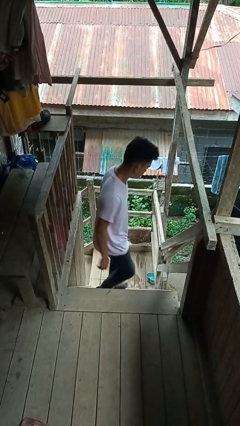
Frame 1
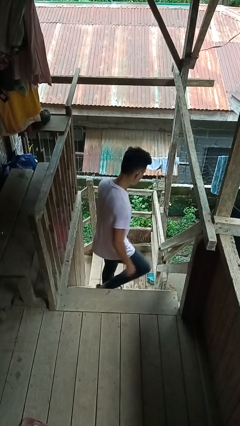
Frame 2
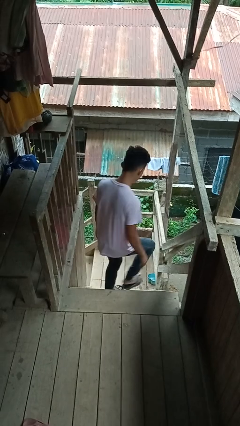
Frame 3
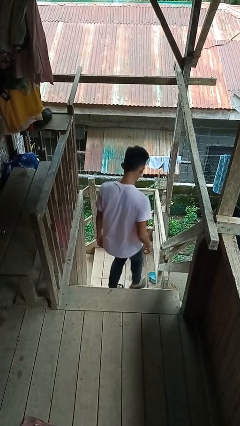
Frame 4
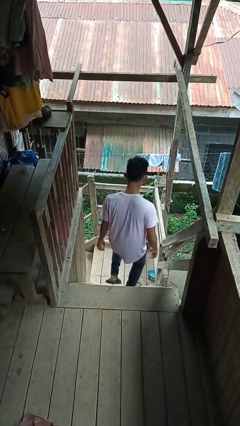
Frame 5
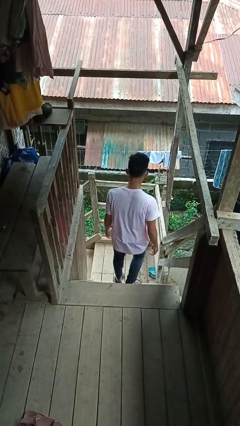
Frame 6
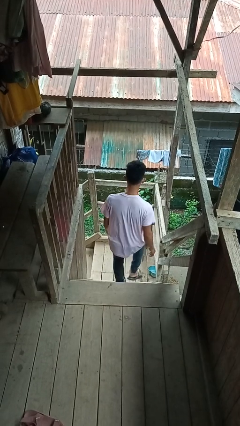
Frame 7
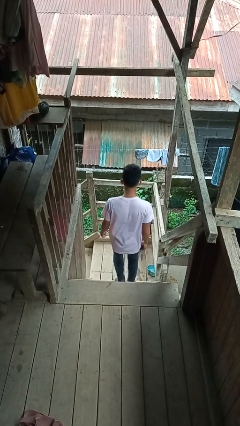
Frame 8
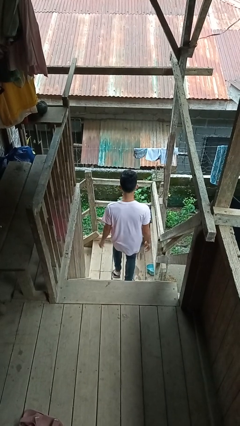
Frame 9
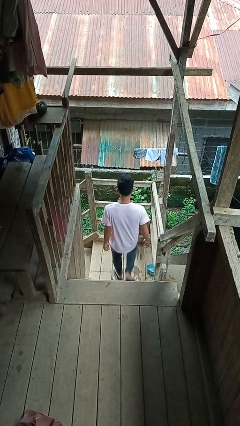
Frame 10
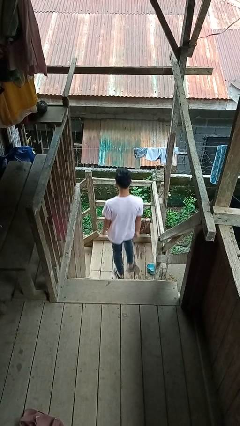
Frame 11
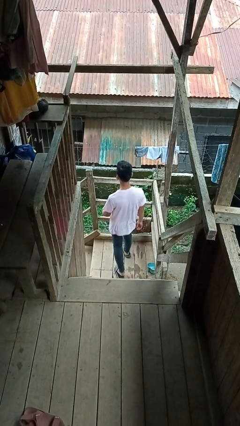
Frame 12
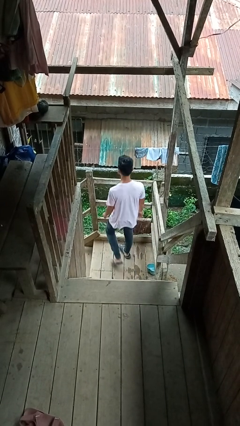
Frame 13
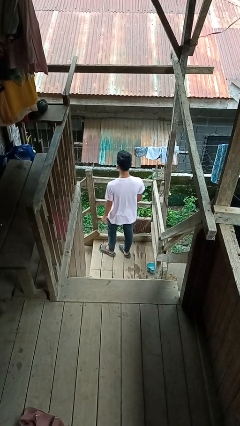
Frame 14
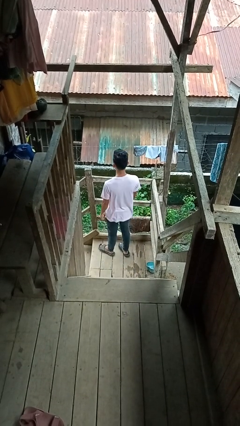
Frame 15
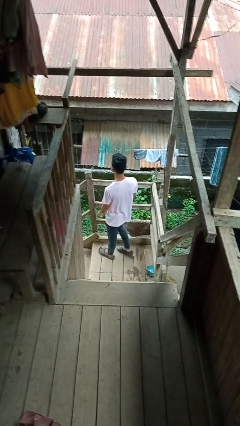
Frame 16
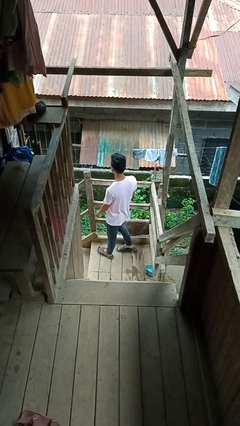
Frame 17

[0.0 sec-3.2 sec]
person climbs down stairs

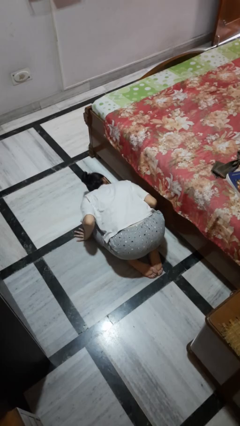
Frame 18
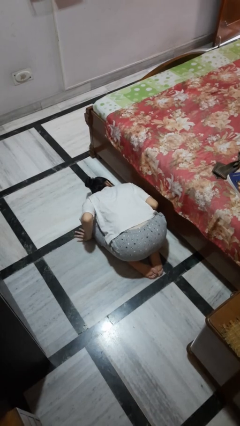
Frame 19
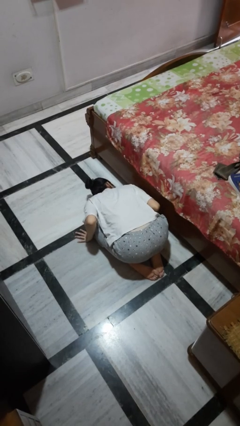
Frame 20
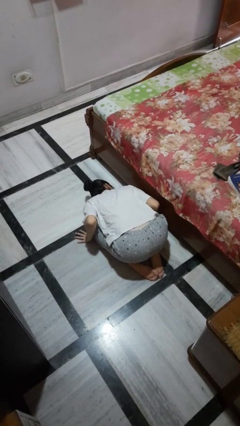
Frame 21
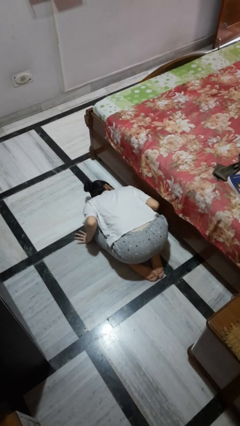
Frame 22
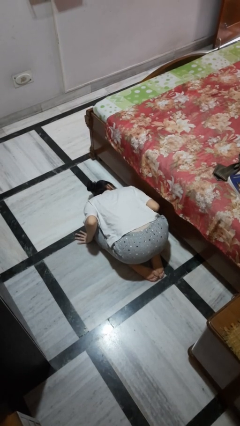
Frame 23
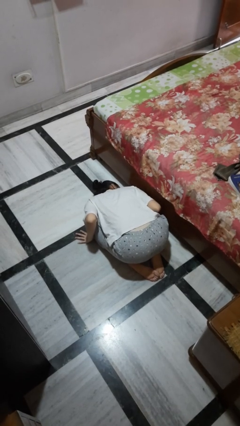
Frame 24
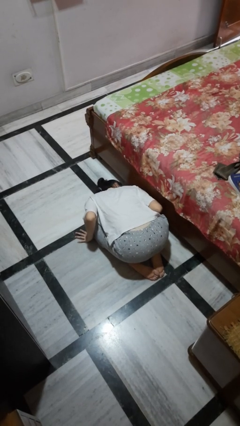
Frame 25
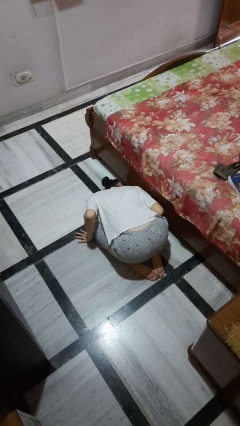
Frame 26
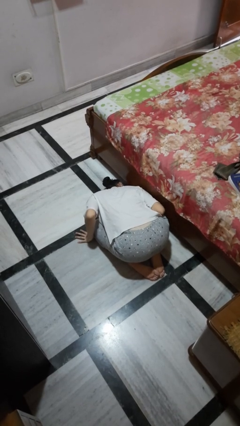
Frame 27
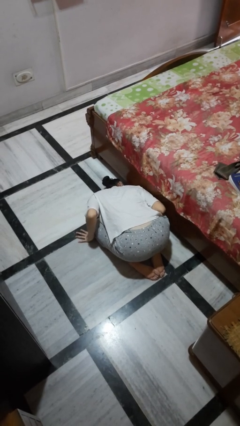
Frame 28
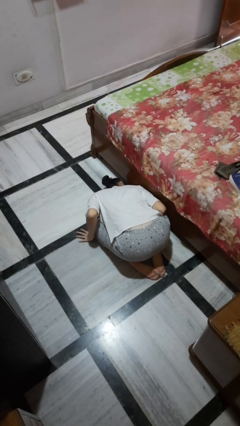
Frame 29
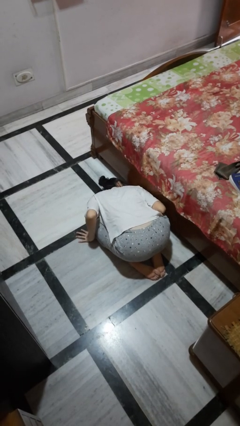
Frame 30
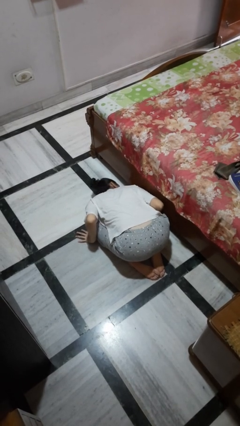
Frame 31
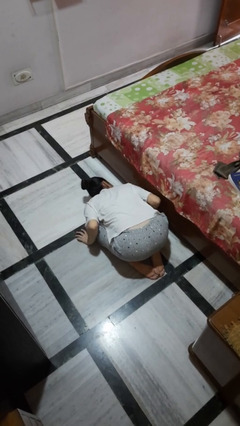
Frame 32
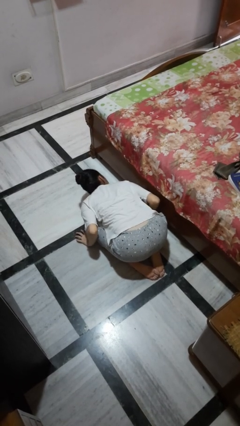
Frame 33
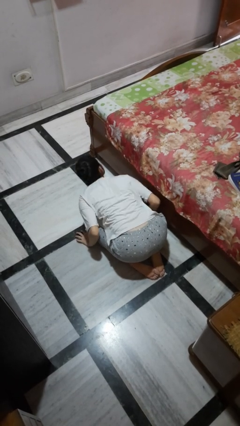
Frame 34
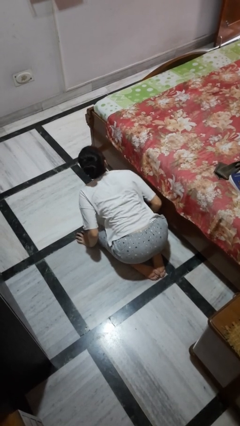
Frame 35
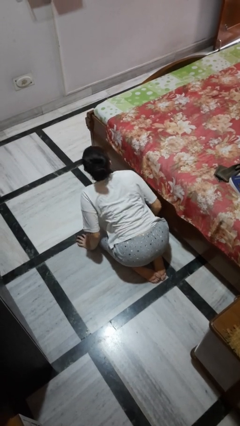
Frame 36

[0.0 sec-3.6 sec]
person searches under bed

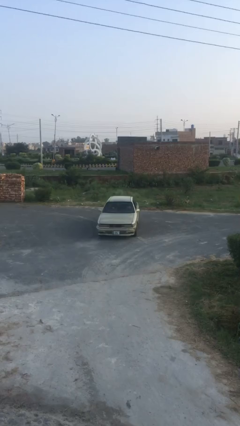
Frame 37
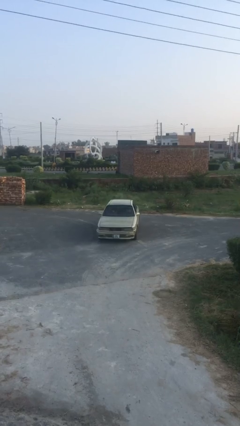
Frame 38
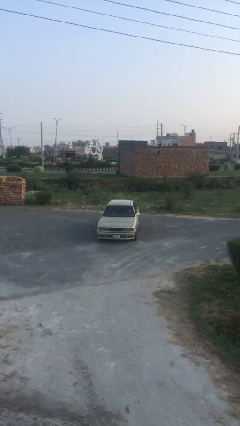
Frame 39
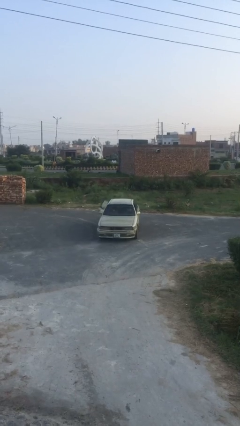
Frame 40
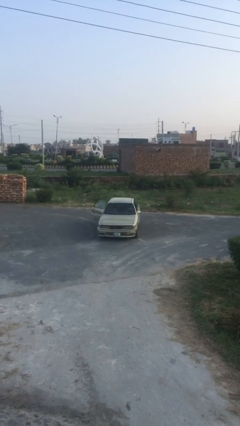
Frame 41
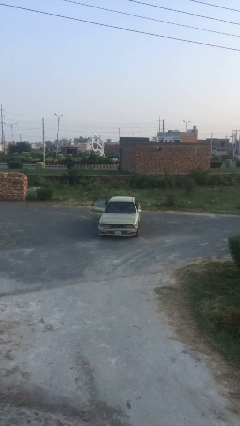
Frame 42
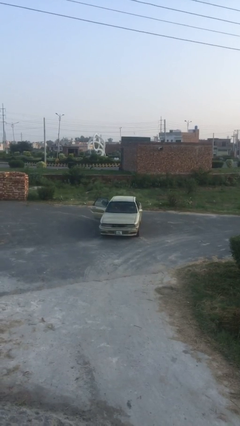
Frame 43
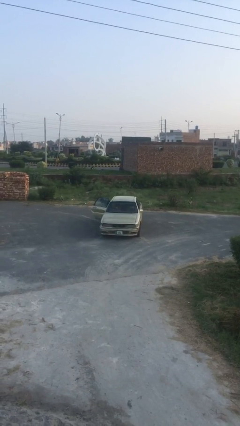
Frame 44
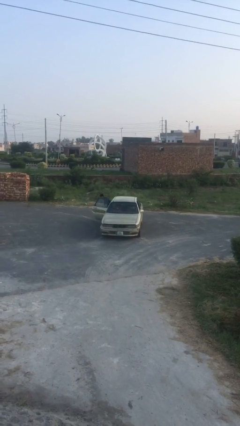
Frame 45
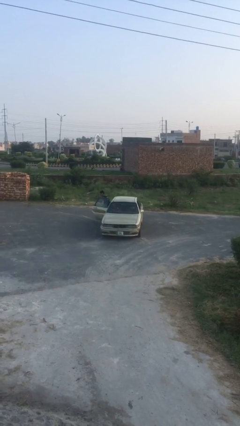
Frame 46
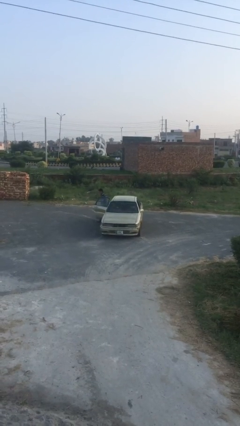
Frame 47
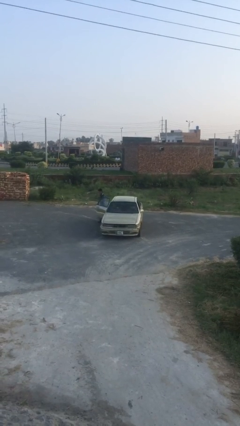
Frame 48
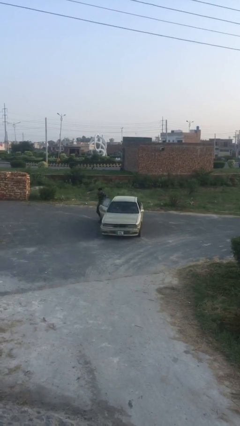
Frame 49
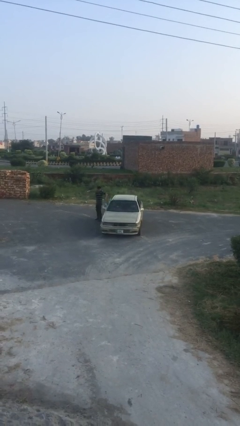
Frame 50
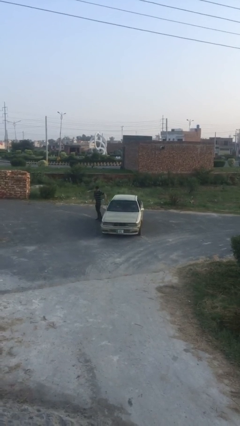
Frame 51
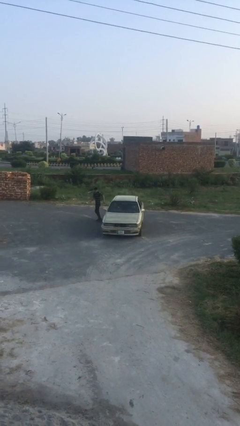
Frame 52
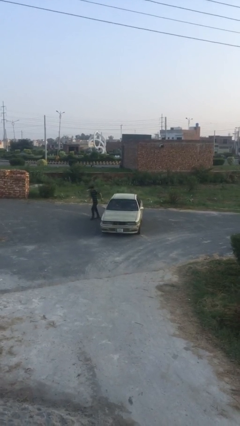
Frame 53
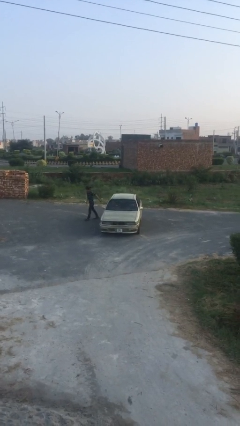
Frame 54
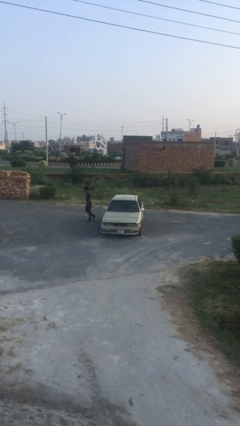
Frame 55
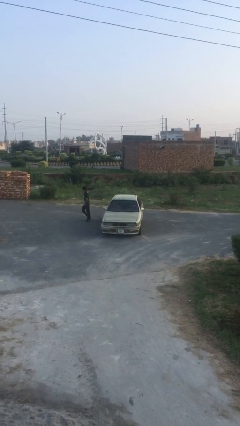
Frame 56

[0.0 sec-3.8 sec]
car drops off person

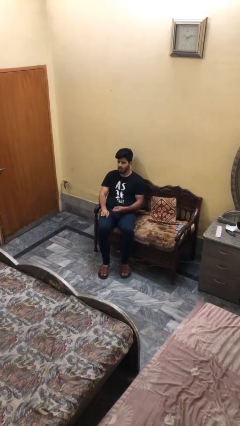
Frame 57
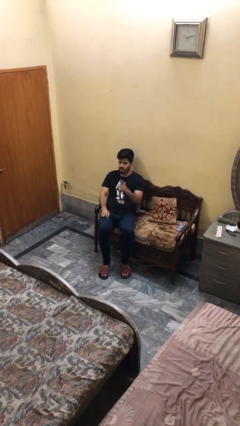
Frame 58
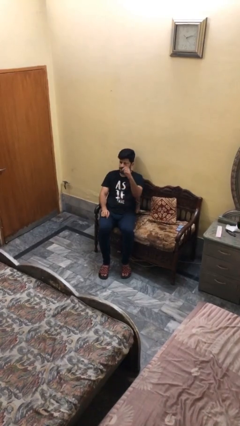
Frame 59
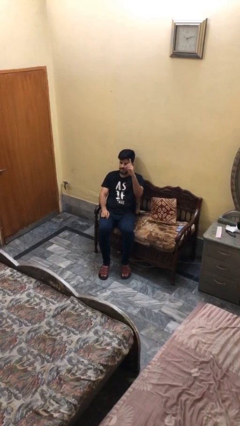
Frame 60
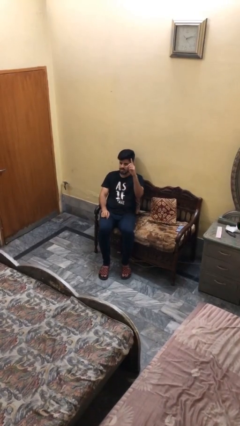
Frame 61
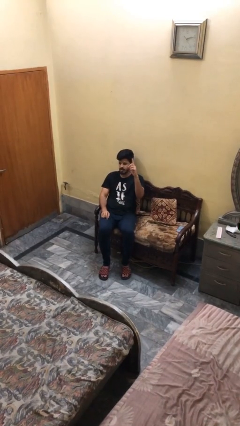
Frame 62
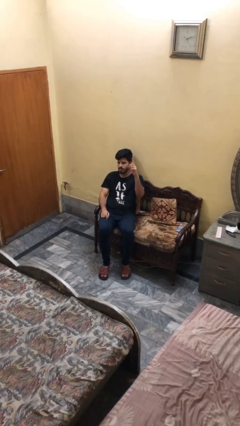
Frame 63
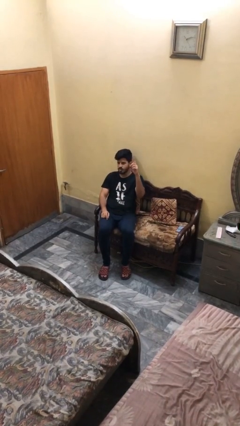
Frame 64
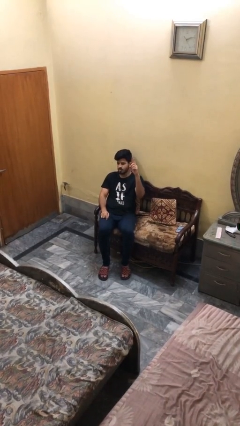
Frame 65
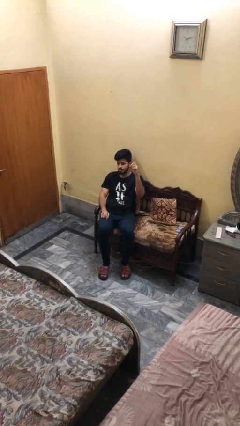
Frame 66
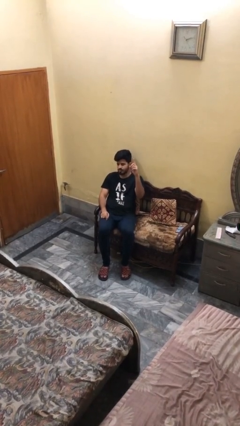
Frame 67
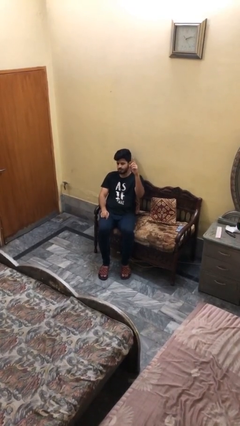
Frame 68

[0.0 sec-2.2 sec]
person gestures raise hand

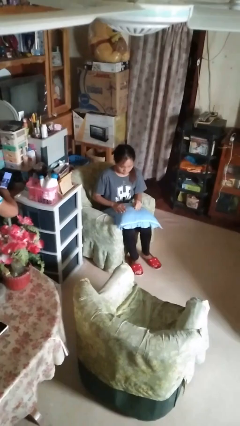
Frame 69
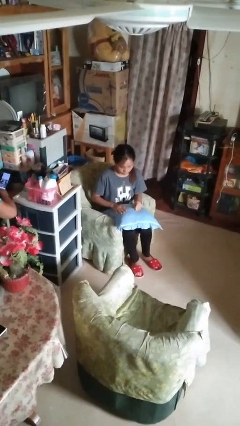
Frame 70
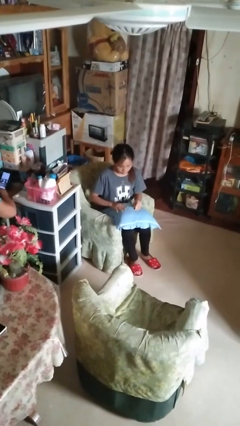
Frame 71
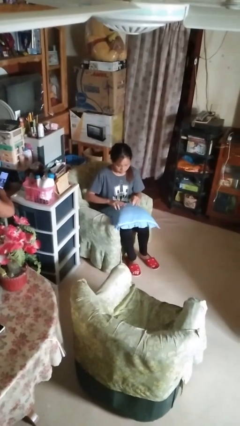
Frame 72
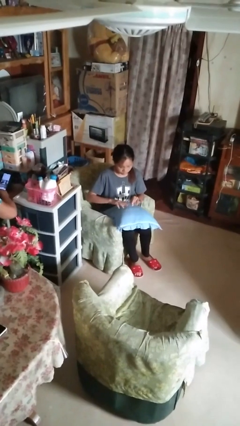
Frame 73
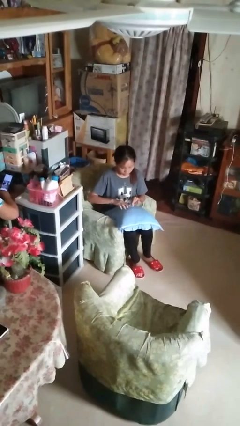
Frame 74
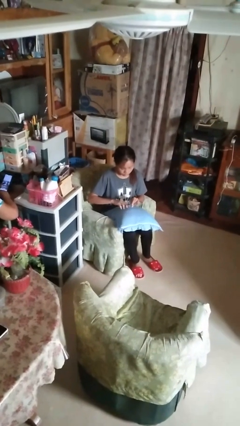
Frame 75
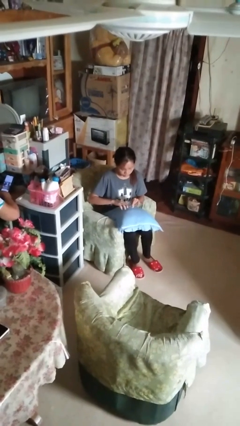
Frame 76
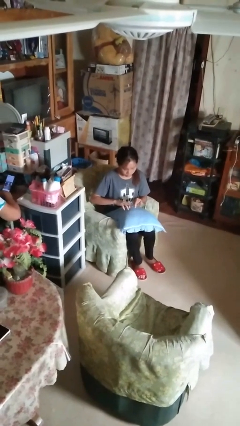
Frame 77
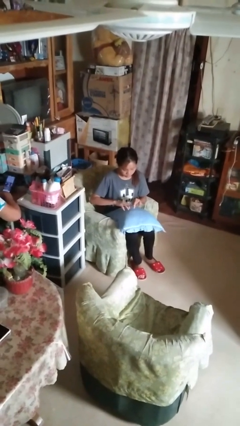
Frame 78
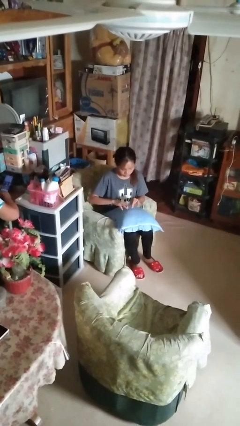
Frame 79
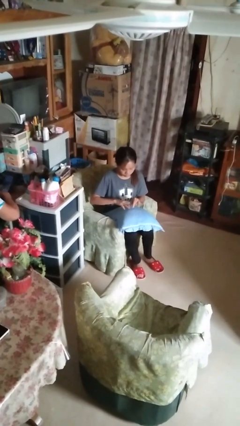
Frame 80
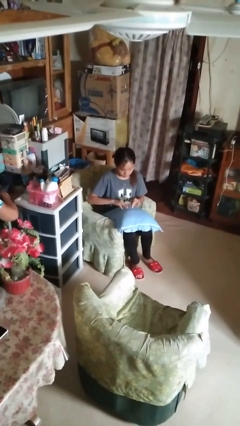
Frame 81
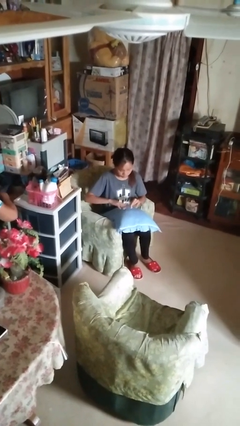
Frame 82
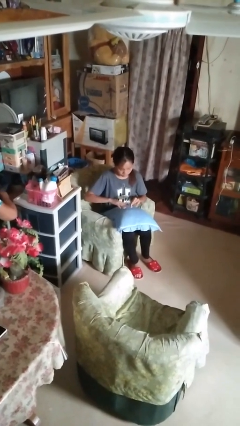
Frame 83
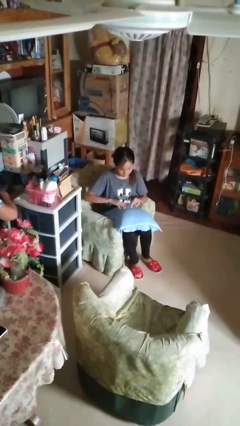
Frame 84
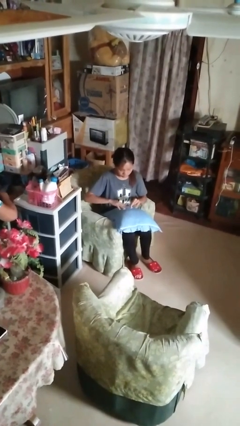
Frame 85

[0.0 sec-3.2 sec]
person files fingernails

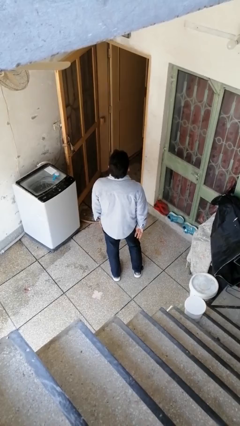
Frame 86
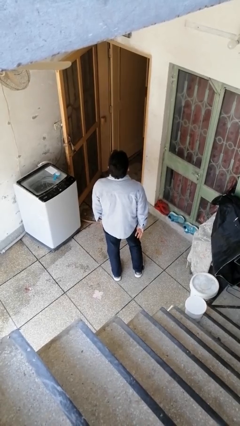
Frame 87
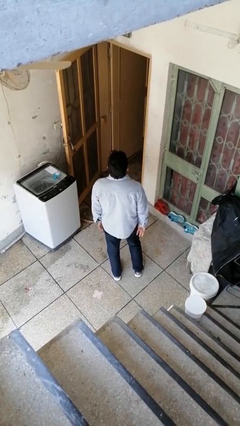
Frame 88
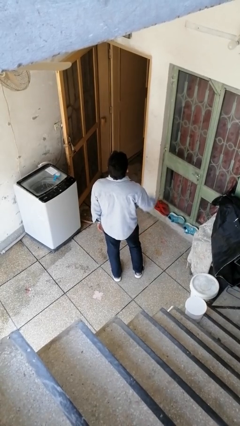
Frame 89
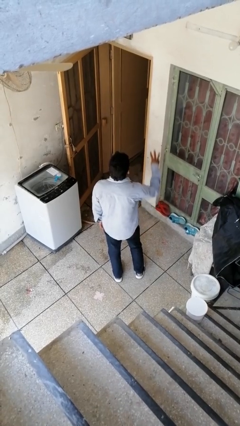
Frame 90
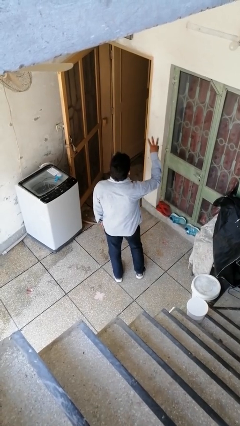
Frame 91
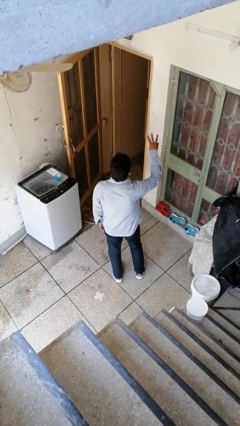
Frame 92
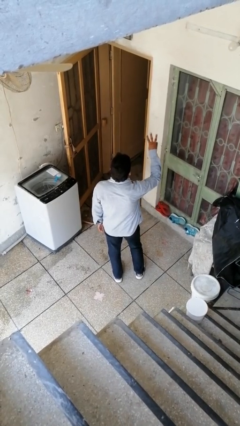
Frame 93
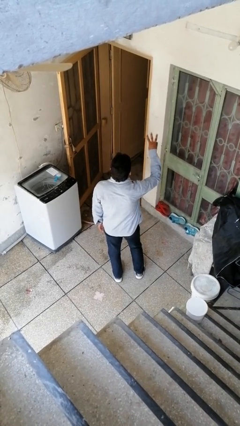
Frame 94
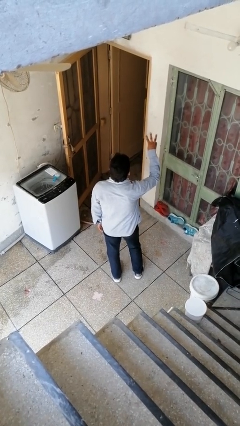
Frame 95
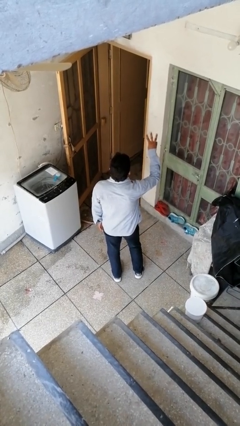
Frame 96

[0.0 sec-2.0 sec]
person gestures number three
